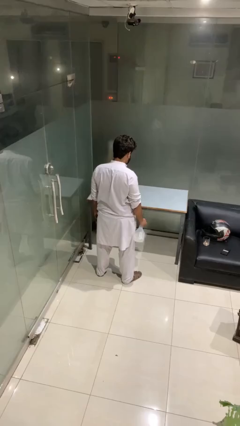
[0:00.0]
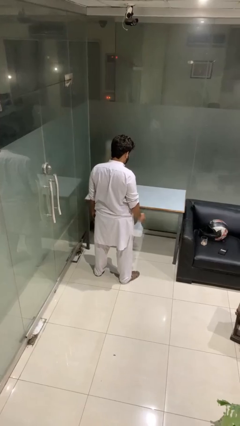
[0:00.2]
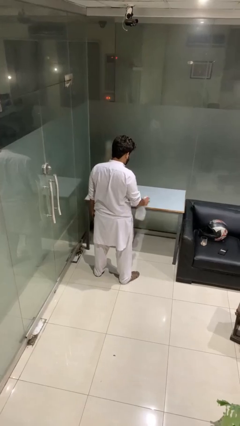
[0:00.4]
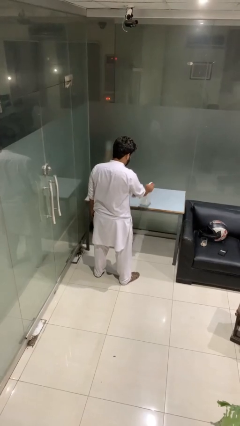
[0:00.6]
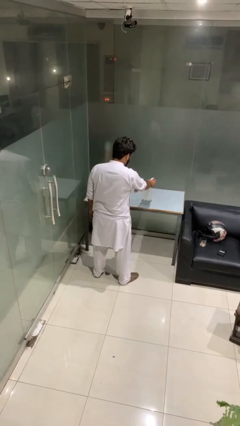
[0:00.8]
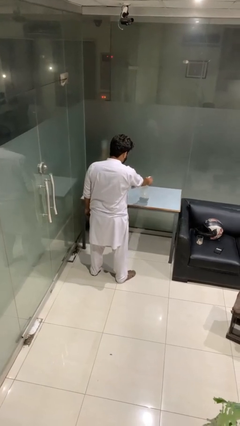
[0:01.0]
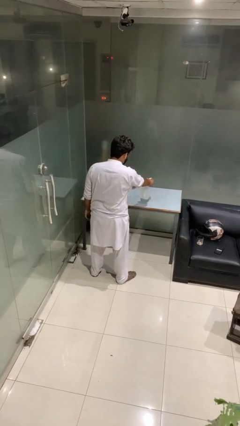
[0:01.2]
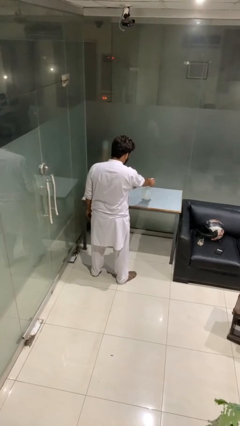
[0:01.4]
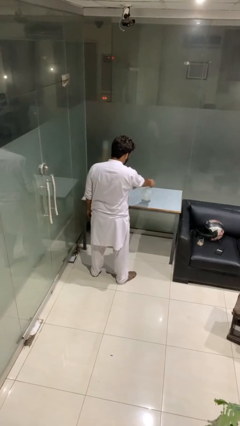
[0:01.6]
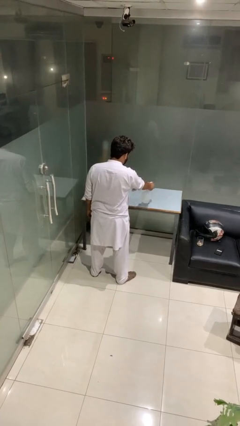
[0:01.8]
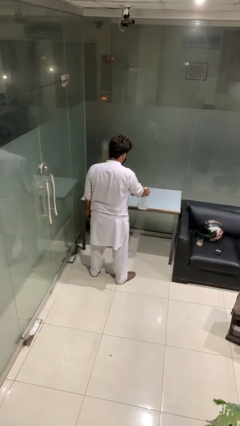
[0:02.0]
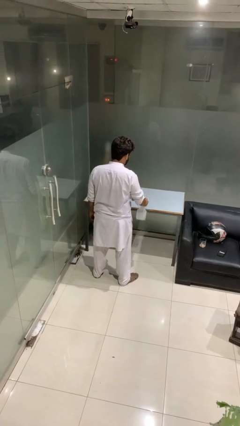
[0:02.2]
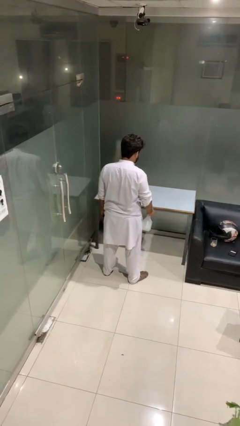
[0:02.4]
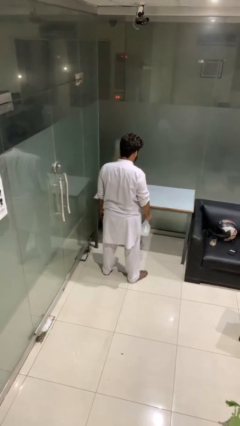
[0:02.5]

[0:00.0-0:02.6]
person sprays from bottle

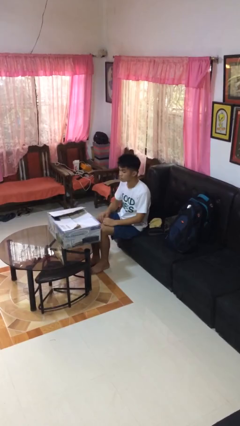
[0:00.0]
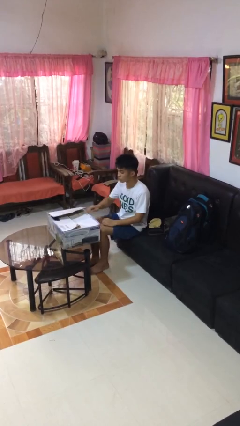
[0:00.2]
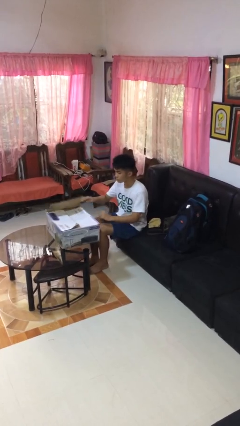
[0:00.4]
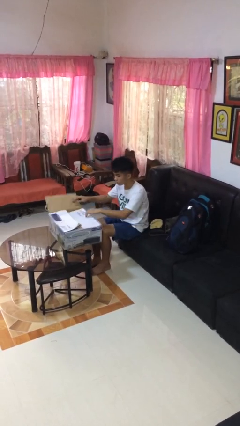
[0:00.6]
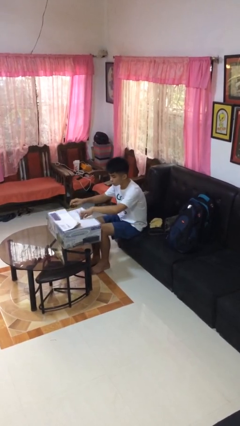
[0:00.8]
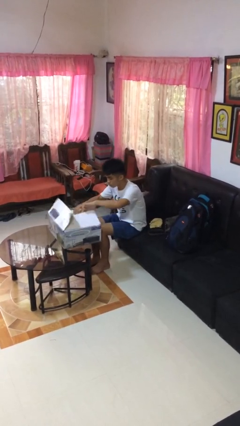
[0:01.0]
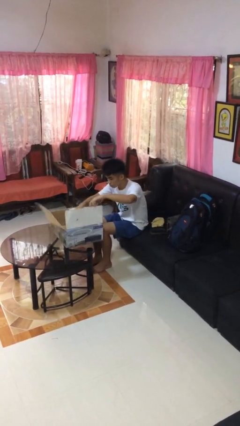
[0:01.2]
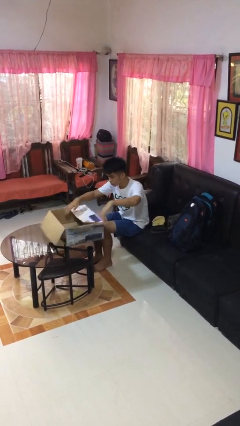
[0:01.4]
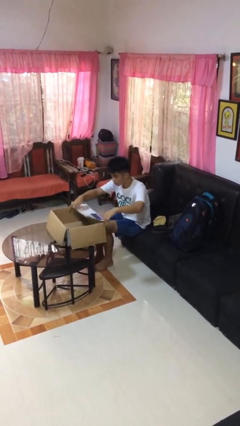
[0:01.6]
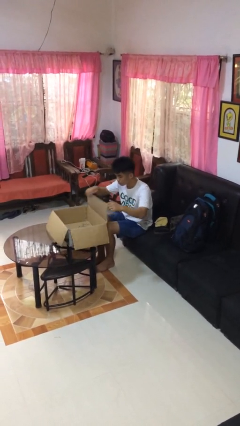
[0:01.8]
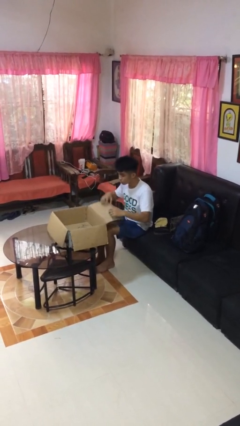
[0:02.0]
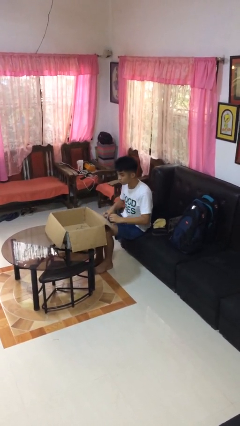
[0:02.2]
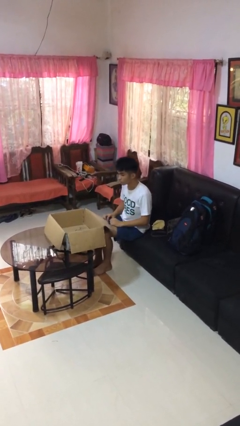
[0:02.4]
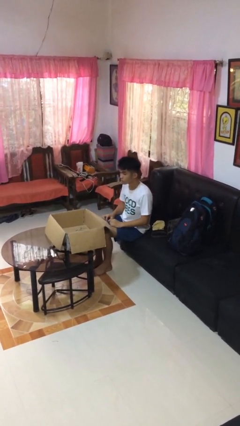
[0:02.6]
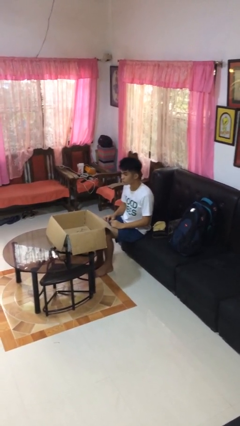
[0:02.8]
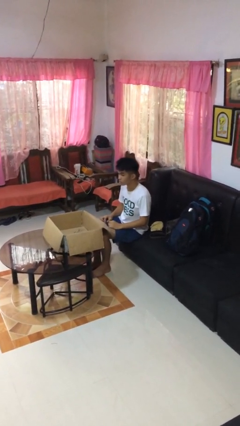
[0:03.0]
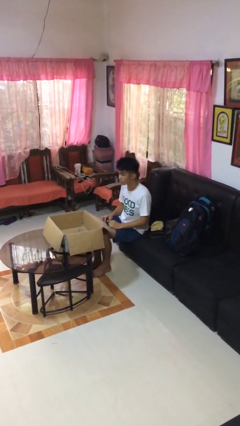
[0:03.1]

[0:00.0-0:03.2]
person opens box

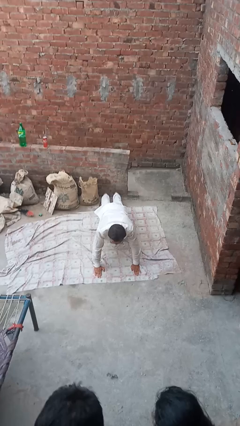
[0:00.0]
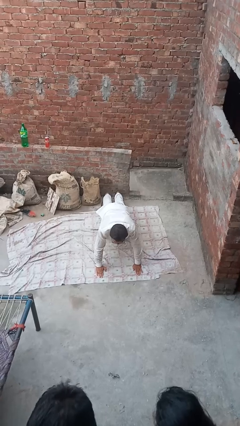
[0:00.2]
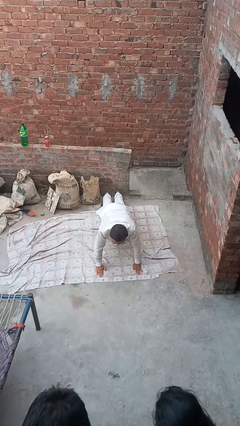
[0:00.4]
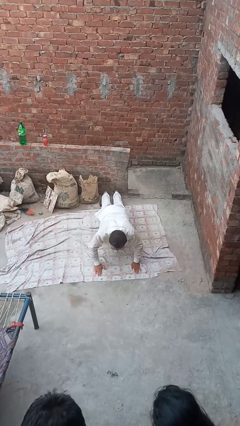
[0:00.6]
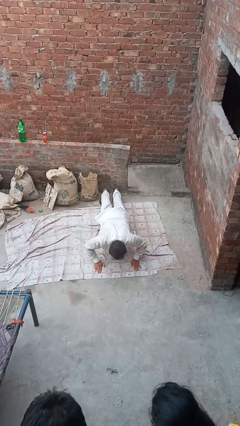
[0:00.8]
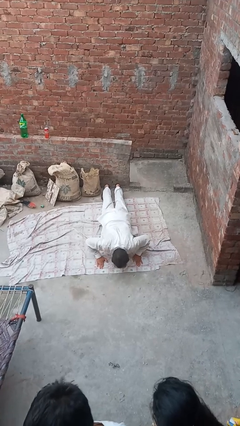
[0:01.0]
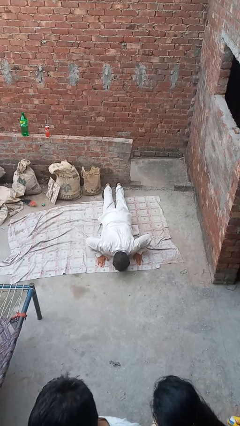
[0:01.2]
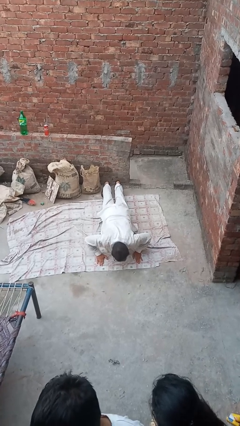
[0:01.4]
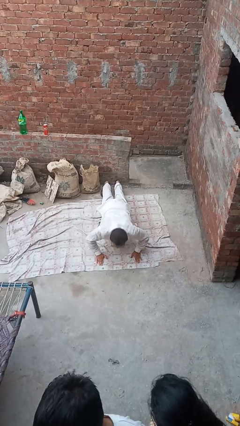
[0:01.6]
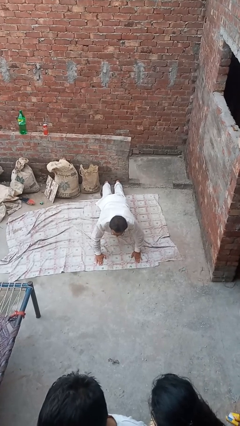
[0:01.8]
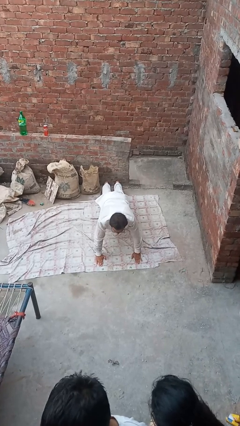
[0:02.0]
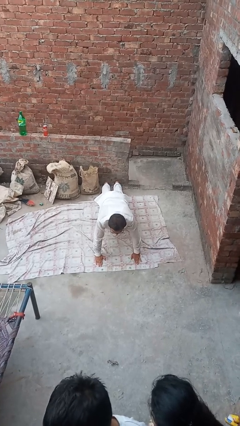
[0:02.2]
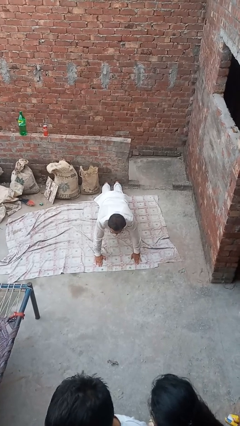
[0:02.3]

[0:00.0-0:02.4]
person exercises with pushup

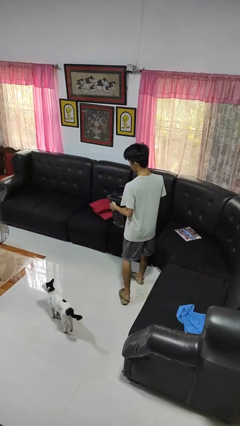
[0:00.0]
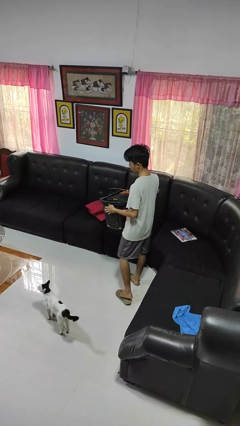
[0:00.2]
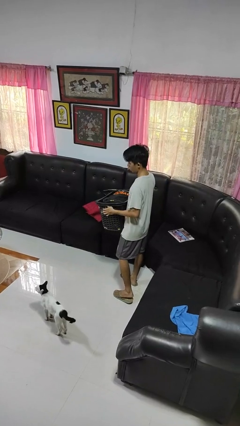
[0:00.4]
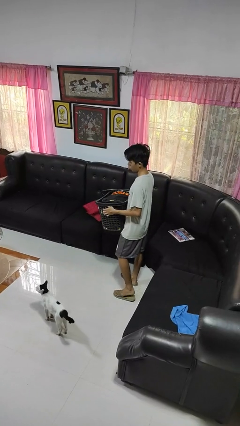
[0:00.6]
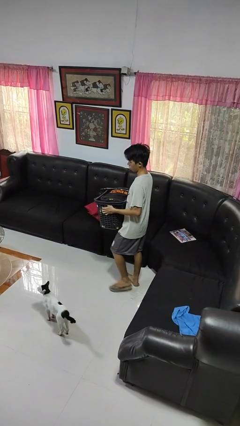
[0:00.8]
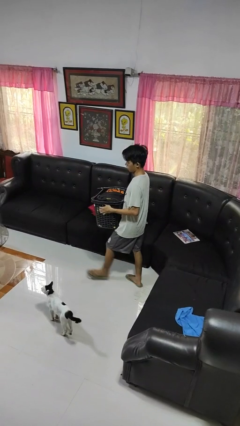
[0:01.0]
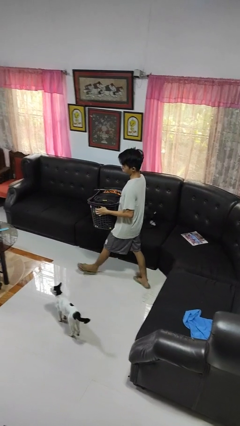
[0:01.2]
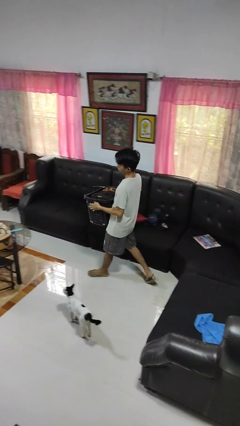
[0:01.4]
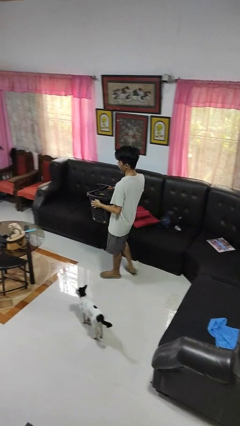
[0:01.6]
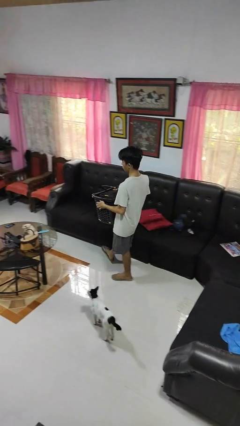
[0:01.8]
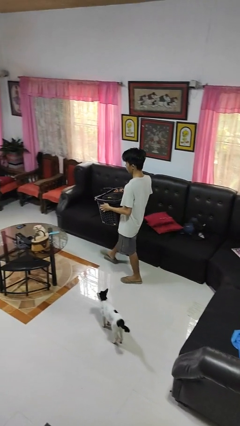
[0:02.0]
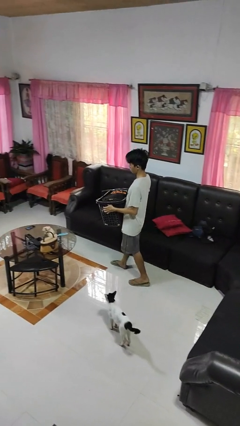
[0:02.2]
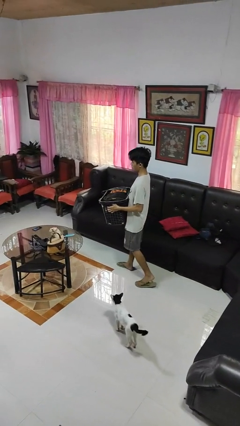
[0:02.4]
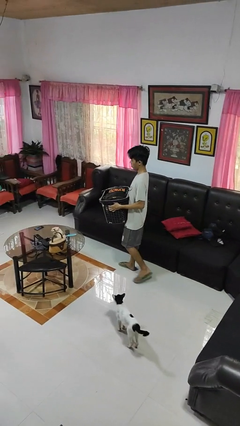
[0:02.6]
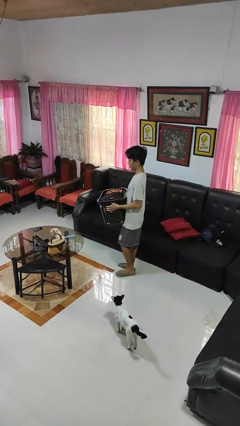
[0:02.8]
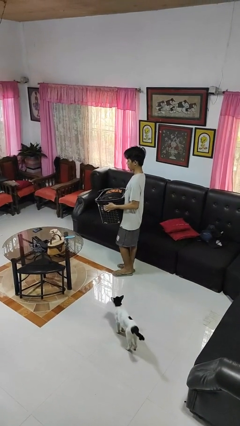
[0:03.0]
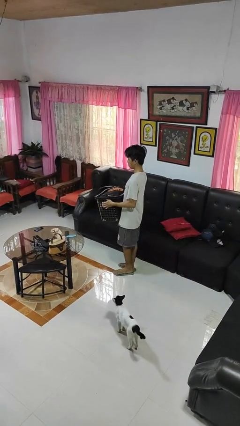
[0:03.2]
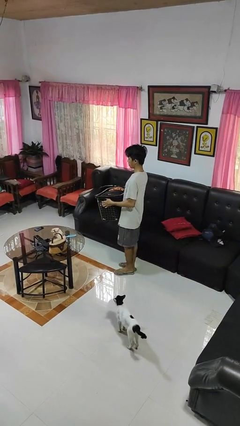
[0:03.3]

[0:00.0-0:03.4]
person carries laundry basket

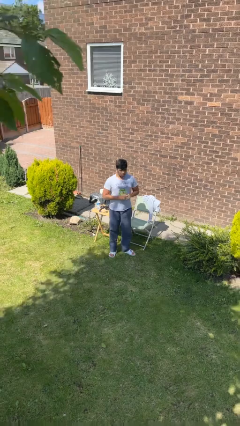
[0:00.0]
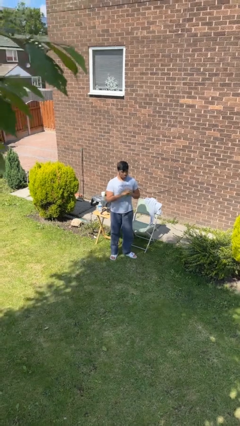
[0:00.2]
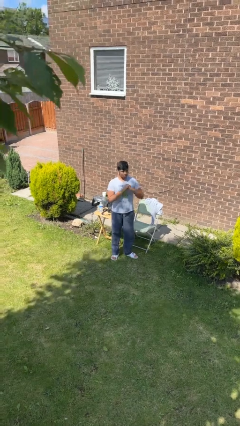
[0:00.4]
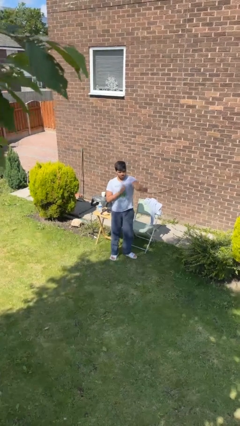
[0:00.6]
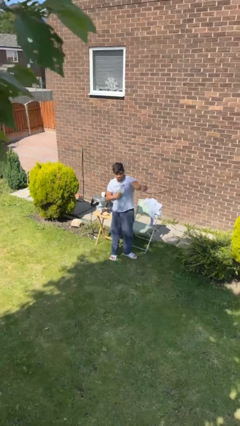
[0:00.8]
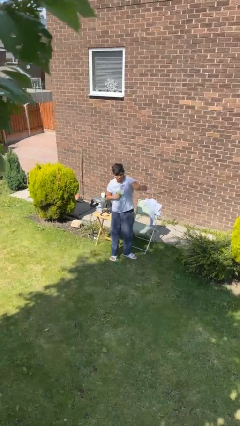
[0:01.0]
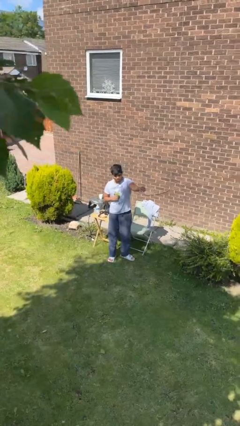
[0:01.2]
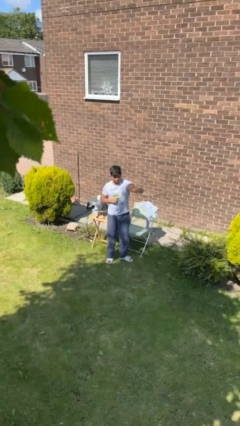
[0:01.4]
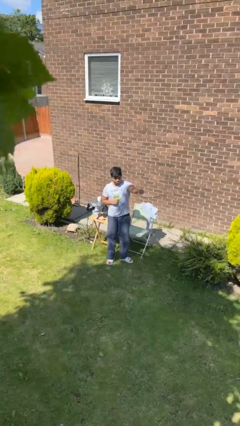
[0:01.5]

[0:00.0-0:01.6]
person punches

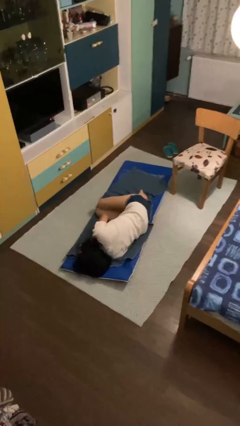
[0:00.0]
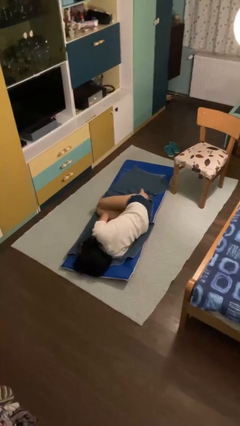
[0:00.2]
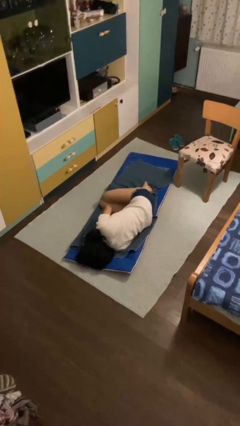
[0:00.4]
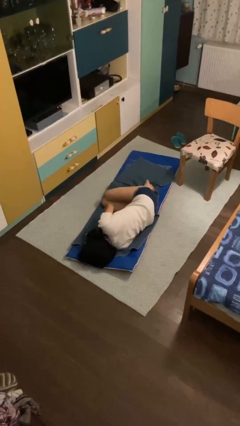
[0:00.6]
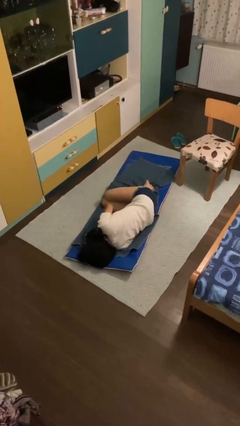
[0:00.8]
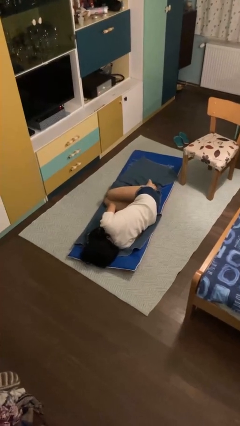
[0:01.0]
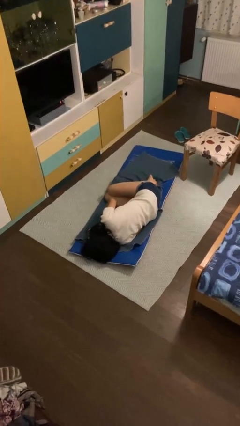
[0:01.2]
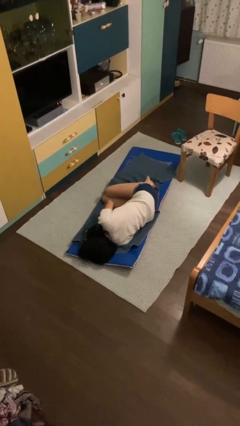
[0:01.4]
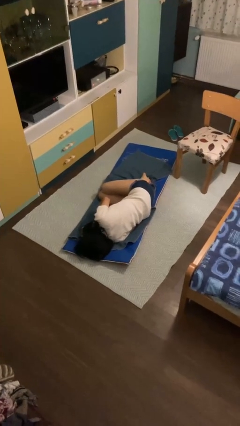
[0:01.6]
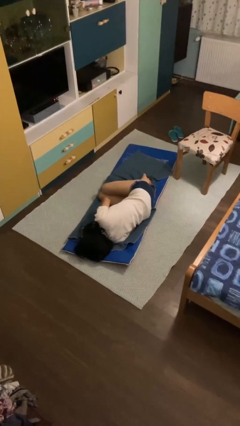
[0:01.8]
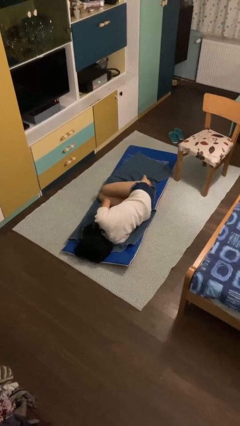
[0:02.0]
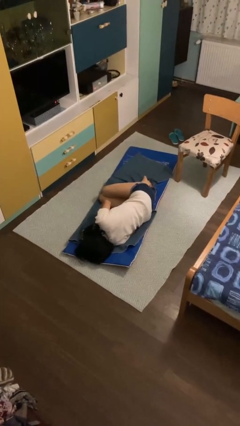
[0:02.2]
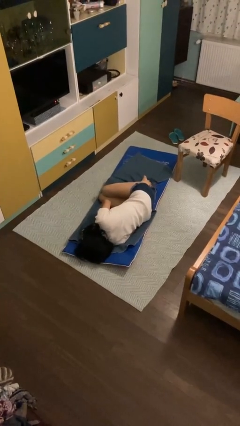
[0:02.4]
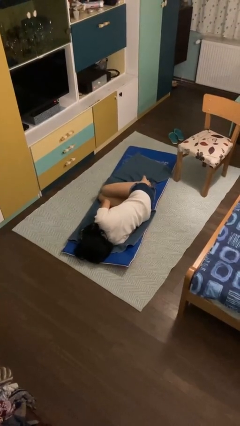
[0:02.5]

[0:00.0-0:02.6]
person lies down on floor

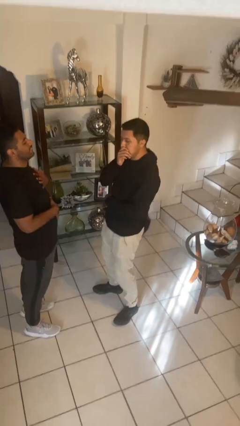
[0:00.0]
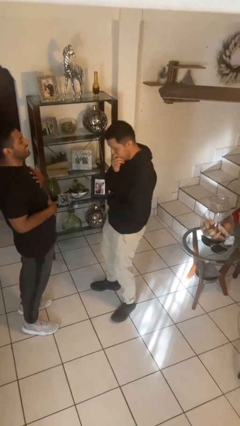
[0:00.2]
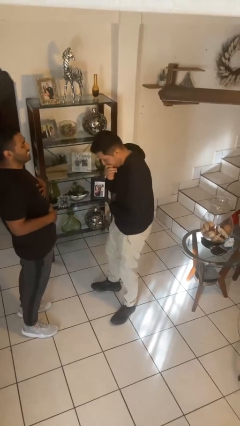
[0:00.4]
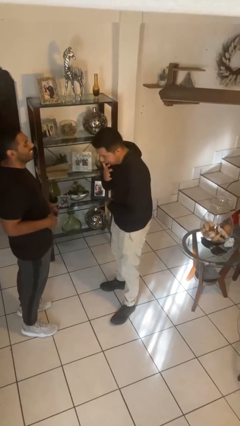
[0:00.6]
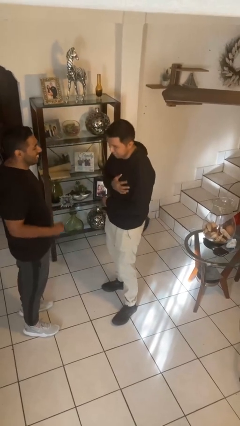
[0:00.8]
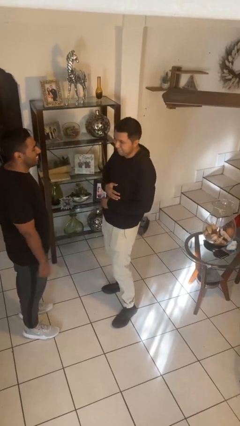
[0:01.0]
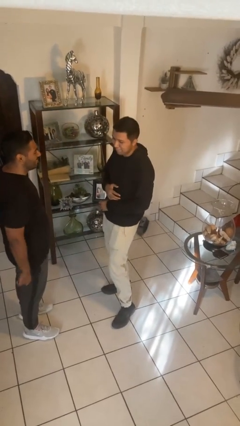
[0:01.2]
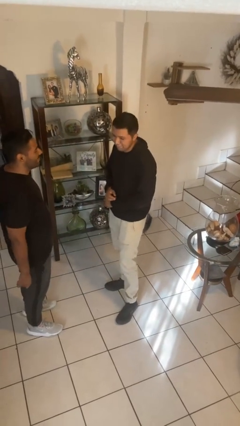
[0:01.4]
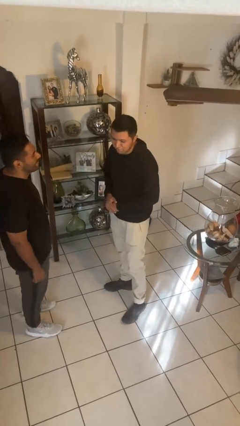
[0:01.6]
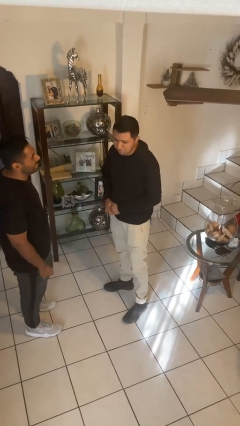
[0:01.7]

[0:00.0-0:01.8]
person laughs with person
